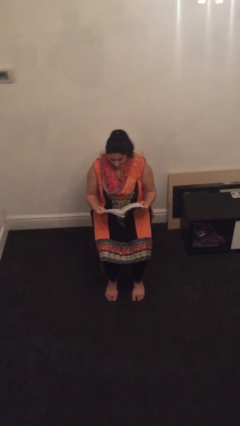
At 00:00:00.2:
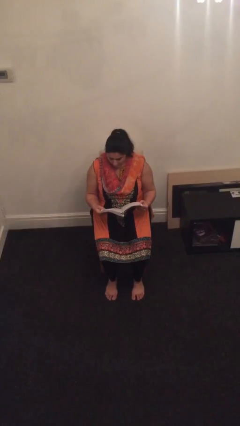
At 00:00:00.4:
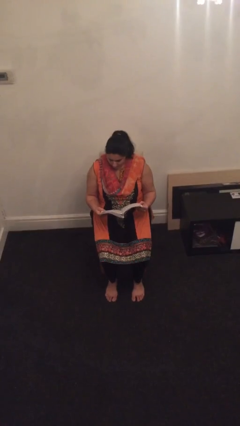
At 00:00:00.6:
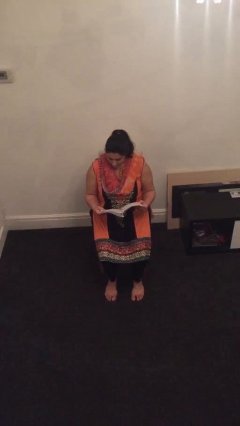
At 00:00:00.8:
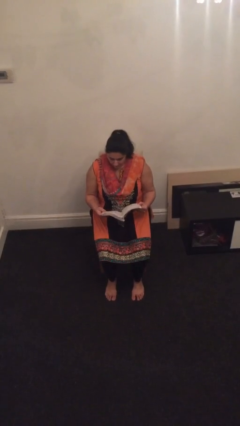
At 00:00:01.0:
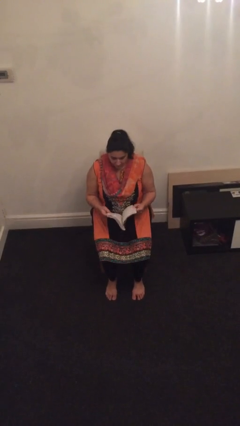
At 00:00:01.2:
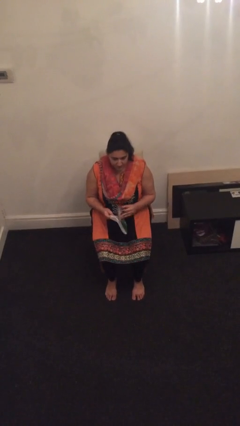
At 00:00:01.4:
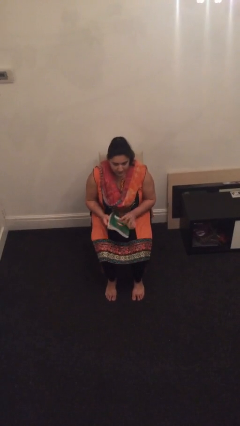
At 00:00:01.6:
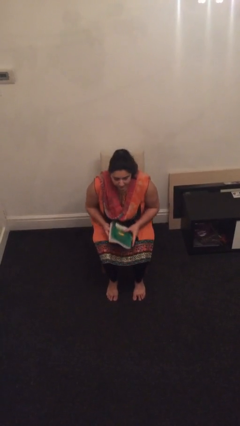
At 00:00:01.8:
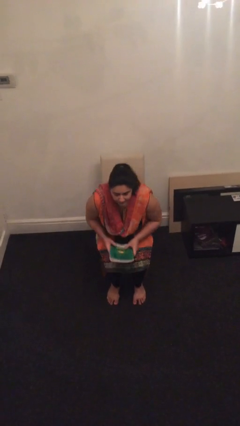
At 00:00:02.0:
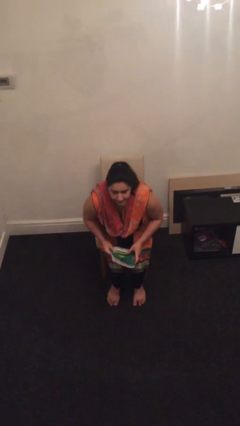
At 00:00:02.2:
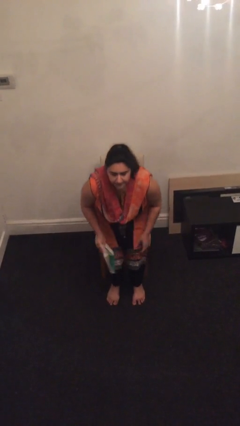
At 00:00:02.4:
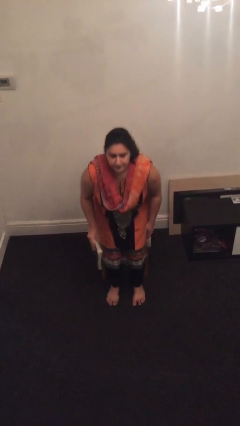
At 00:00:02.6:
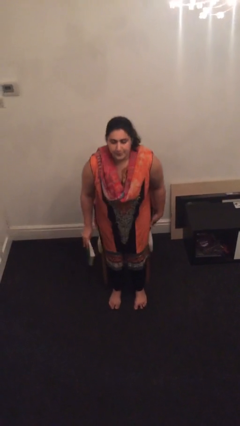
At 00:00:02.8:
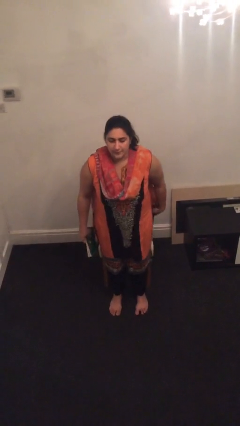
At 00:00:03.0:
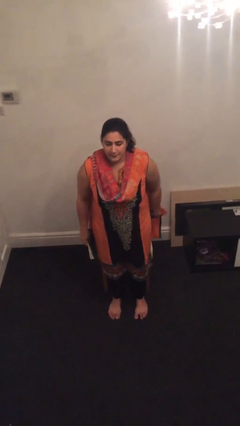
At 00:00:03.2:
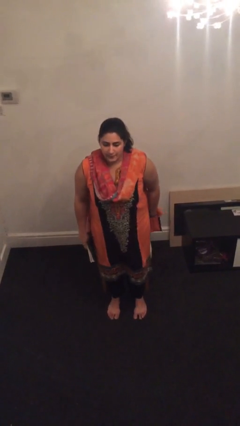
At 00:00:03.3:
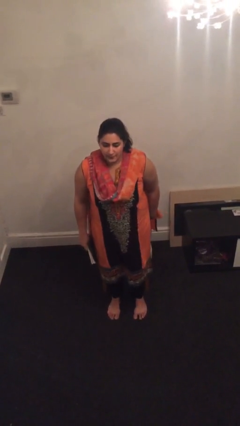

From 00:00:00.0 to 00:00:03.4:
person stands up

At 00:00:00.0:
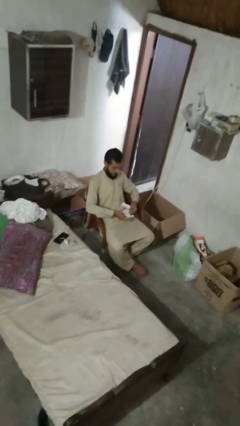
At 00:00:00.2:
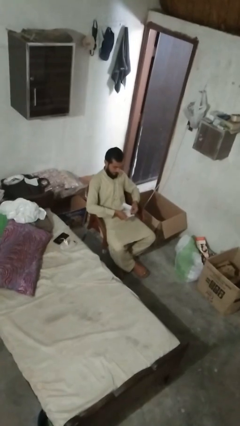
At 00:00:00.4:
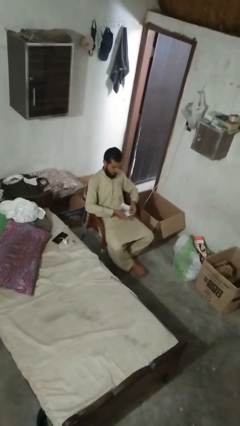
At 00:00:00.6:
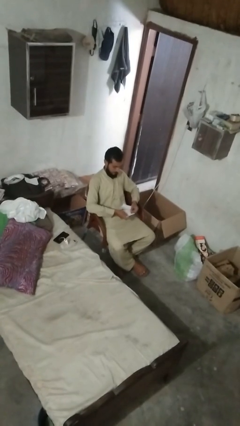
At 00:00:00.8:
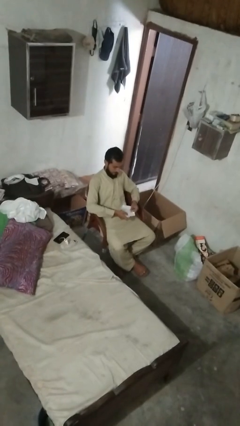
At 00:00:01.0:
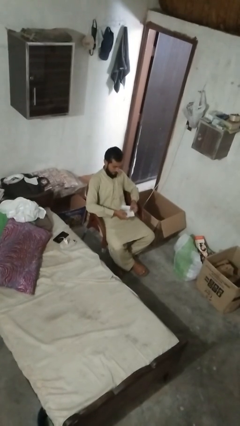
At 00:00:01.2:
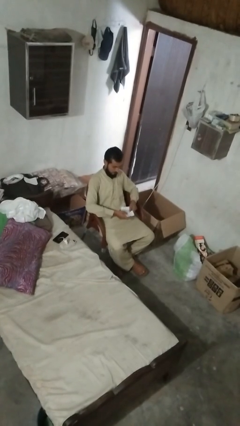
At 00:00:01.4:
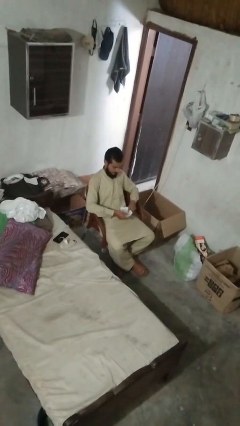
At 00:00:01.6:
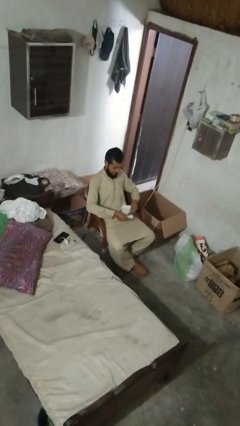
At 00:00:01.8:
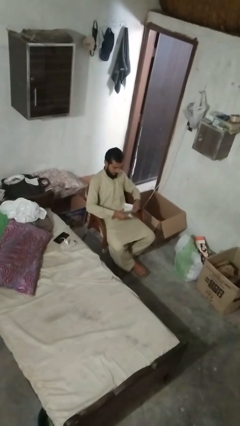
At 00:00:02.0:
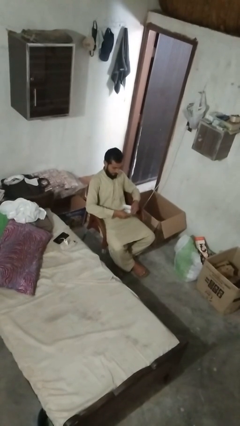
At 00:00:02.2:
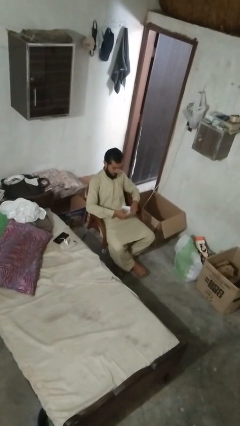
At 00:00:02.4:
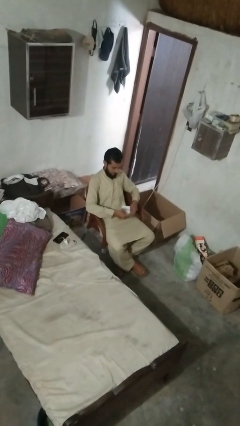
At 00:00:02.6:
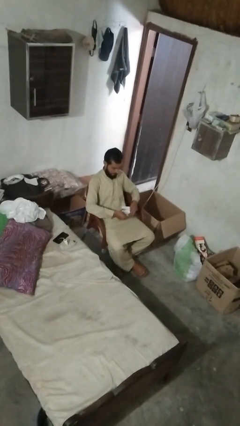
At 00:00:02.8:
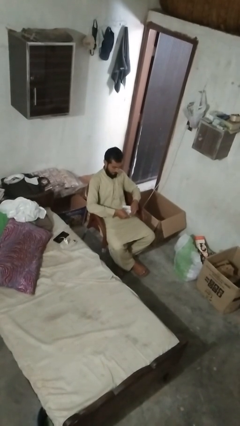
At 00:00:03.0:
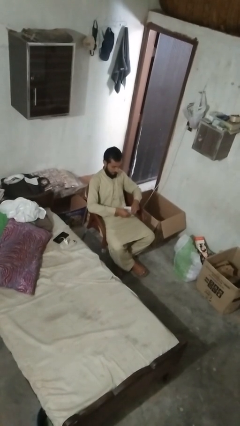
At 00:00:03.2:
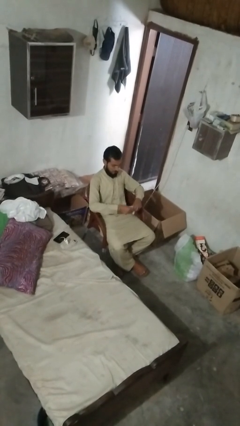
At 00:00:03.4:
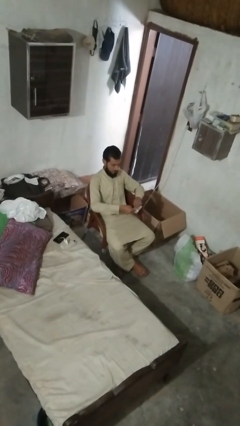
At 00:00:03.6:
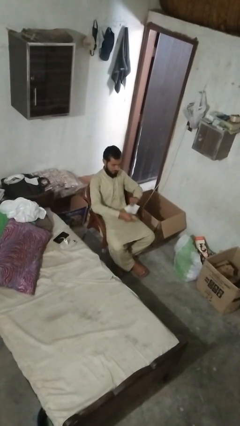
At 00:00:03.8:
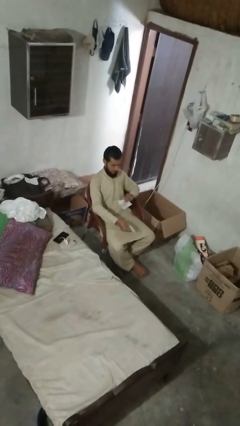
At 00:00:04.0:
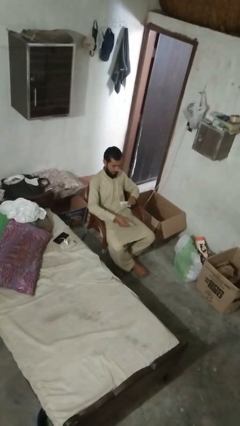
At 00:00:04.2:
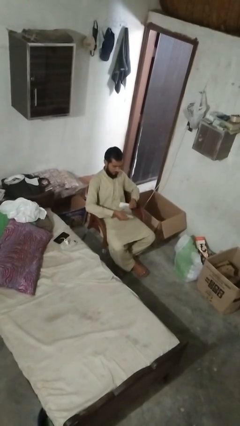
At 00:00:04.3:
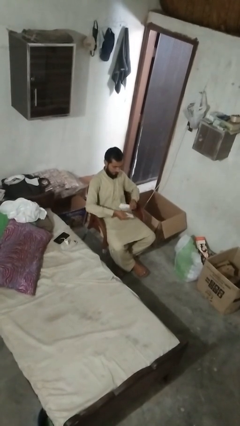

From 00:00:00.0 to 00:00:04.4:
person tears paper

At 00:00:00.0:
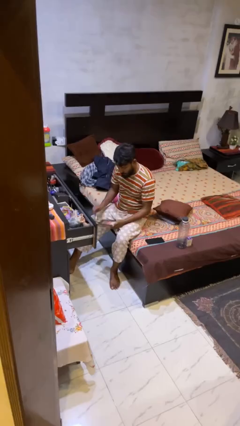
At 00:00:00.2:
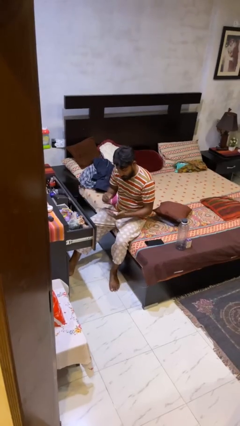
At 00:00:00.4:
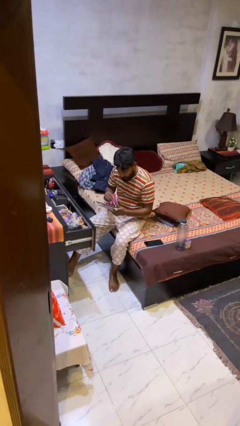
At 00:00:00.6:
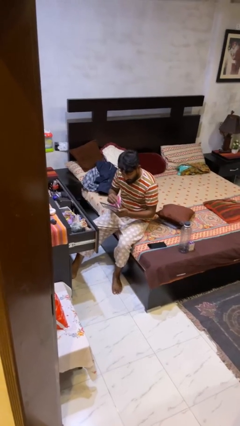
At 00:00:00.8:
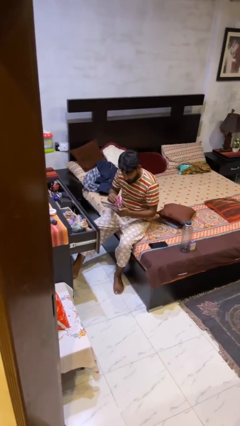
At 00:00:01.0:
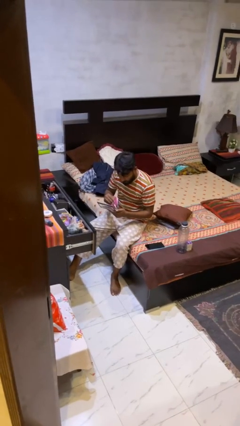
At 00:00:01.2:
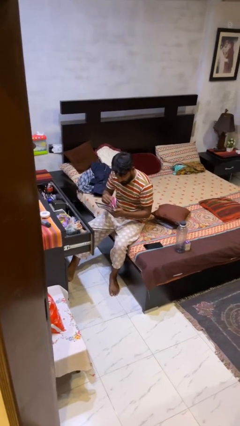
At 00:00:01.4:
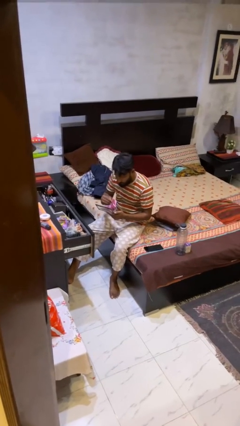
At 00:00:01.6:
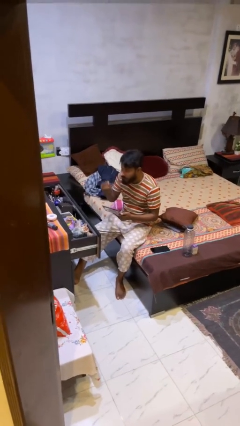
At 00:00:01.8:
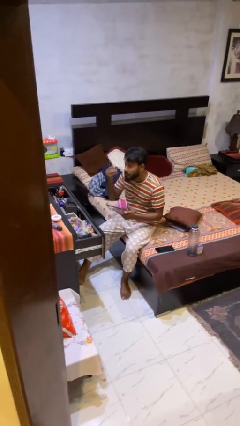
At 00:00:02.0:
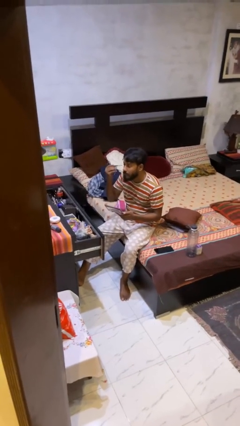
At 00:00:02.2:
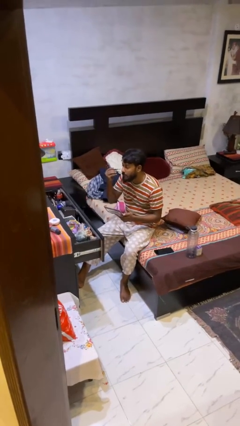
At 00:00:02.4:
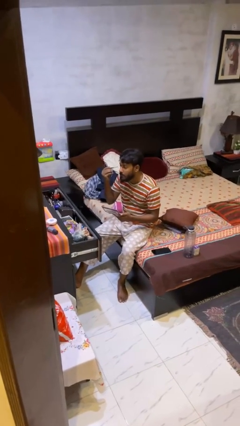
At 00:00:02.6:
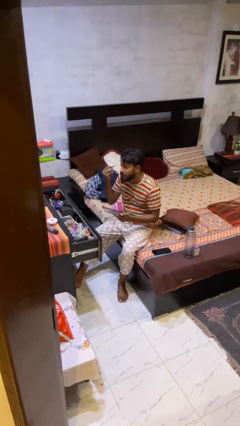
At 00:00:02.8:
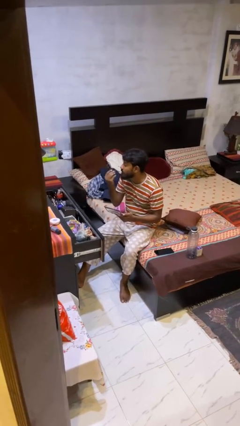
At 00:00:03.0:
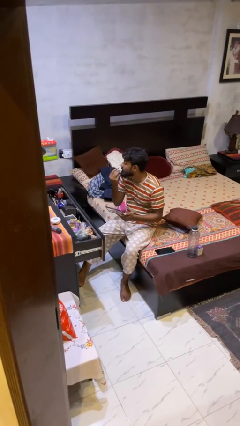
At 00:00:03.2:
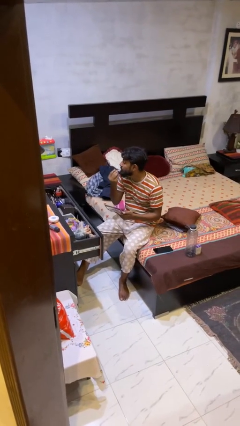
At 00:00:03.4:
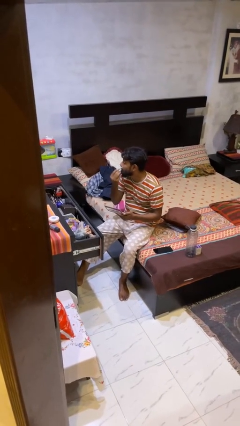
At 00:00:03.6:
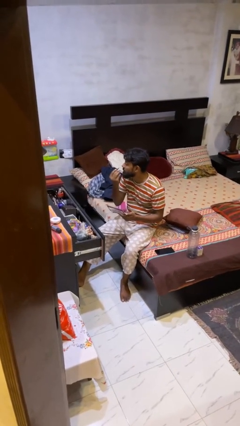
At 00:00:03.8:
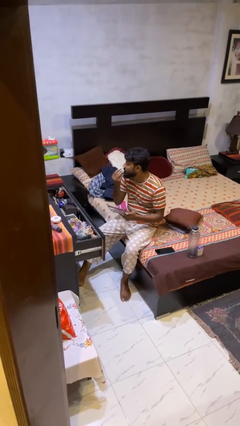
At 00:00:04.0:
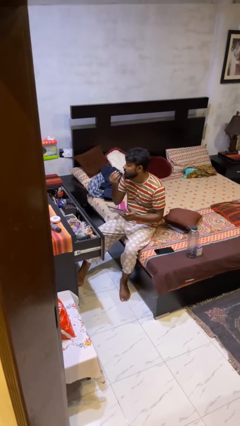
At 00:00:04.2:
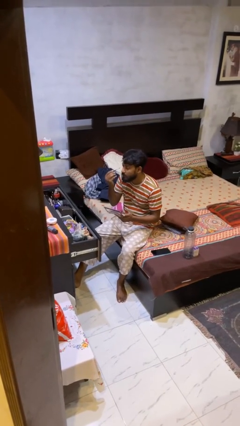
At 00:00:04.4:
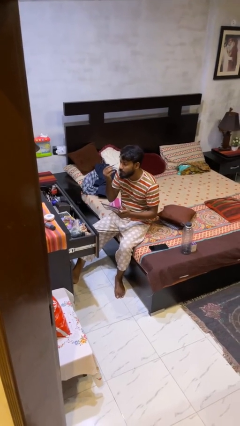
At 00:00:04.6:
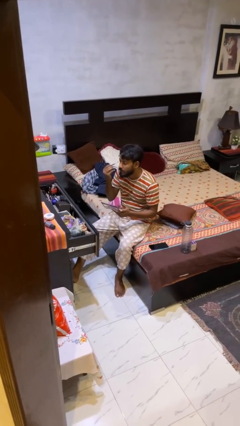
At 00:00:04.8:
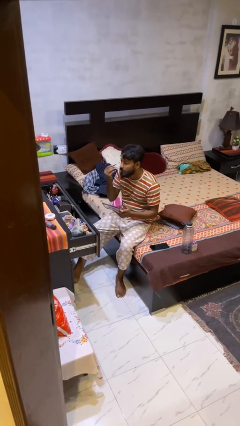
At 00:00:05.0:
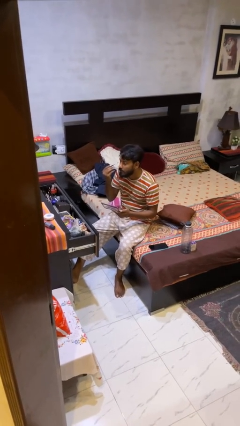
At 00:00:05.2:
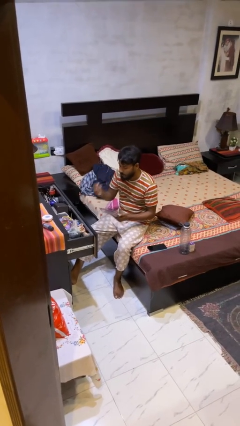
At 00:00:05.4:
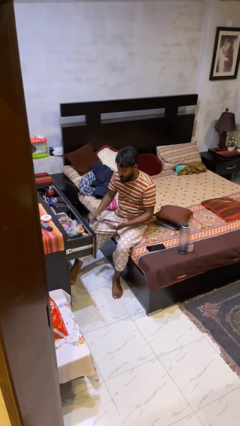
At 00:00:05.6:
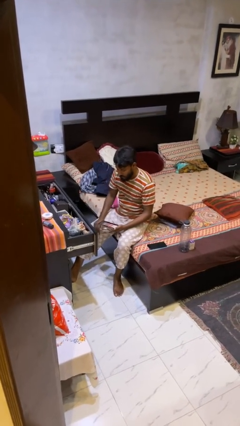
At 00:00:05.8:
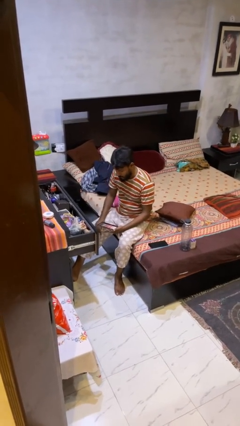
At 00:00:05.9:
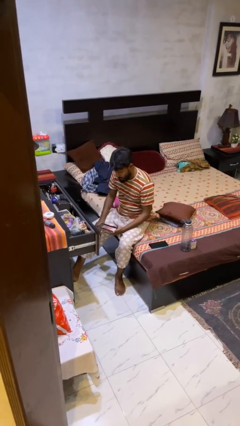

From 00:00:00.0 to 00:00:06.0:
person applies eye makeup

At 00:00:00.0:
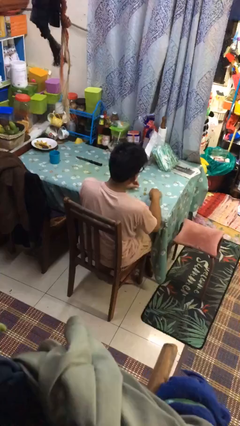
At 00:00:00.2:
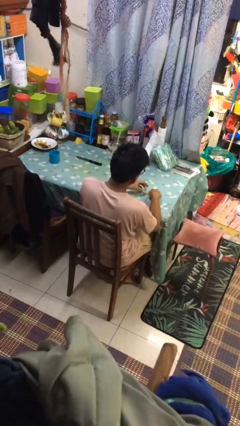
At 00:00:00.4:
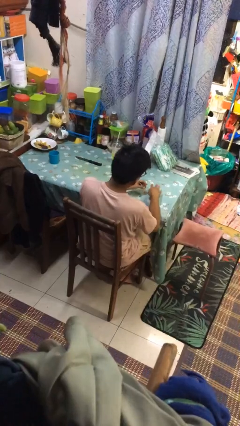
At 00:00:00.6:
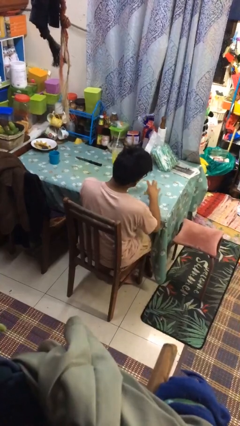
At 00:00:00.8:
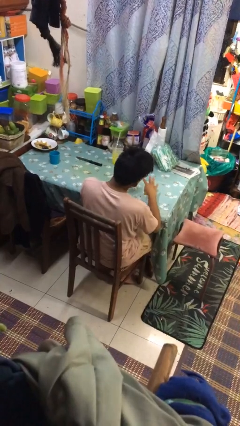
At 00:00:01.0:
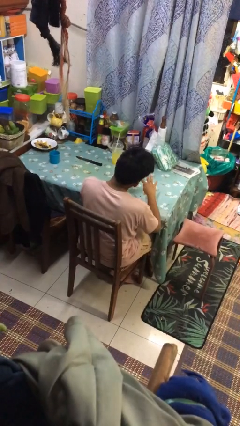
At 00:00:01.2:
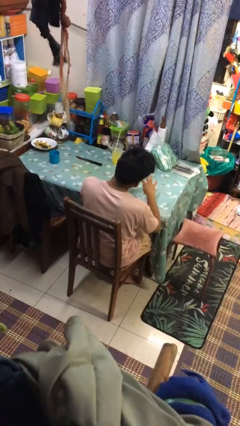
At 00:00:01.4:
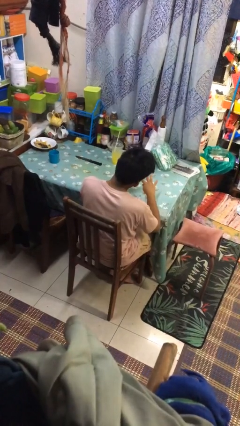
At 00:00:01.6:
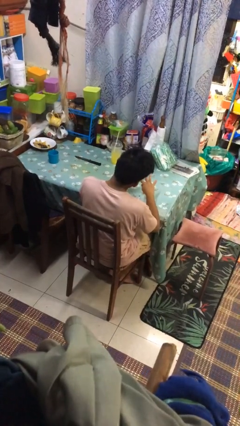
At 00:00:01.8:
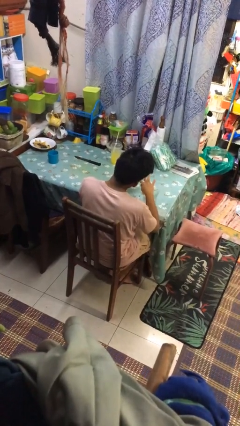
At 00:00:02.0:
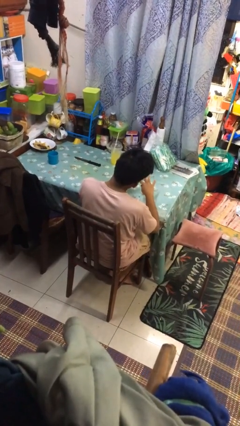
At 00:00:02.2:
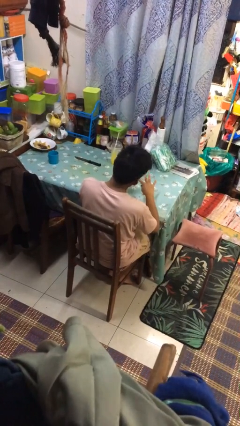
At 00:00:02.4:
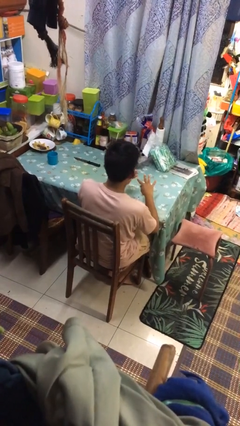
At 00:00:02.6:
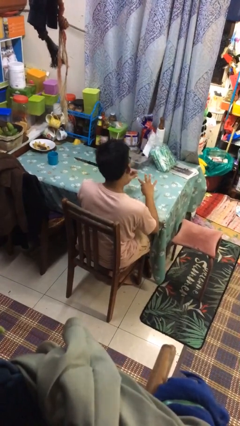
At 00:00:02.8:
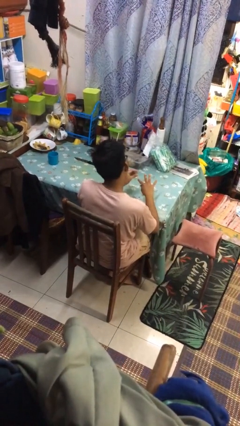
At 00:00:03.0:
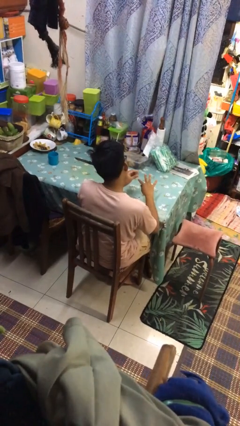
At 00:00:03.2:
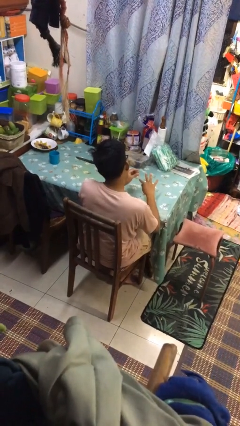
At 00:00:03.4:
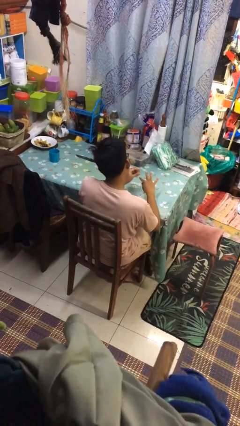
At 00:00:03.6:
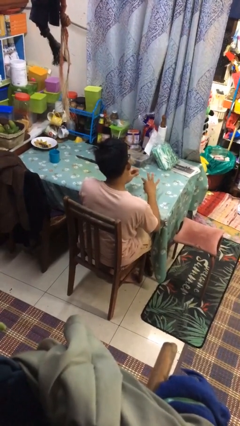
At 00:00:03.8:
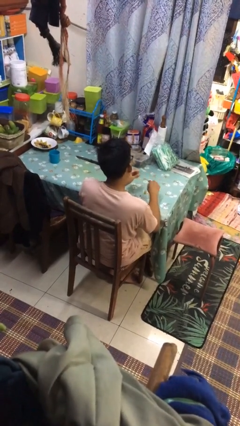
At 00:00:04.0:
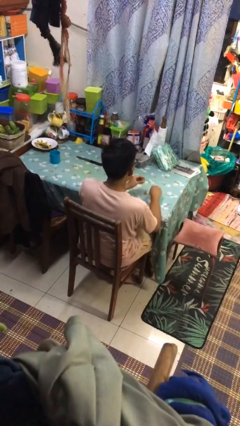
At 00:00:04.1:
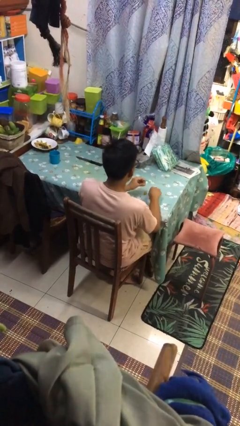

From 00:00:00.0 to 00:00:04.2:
person paints fingernails
